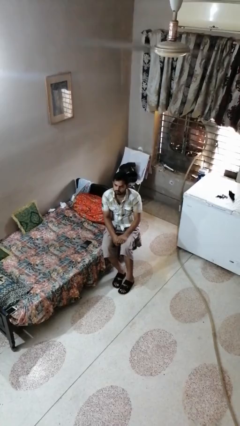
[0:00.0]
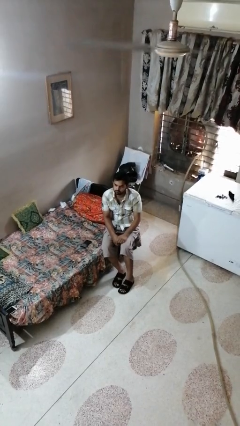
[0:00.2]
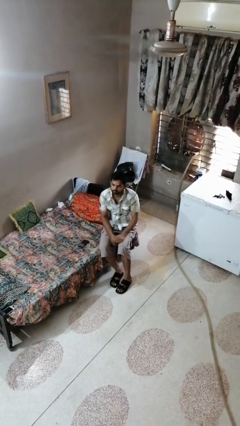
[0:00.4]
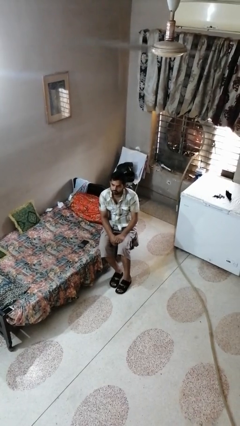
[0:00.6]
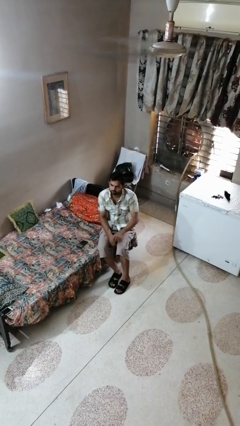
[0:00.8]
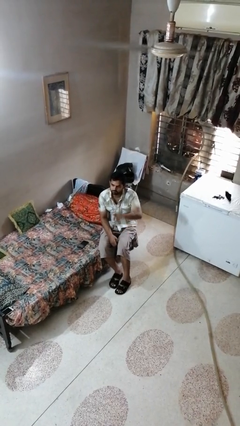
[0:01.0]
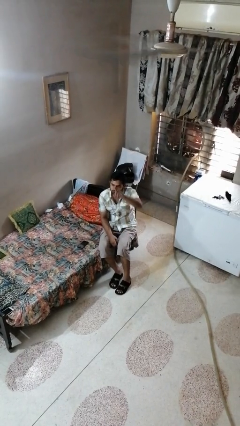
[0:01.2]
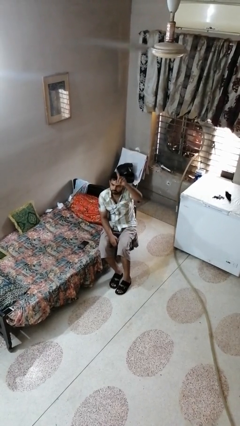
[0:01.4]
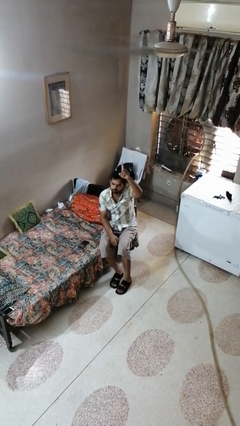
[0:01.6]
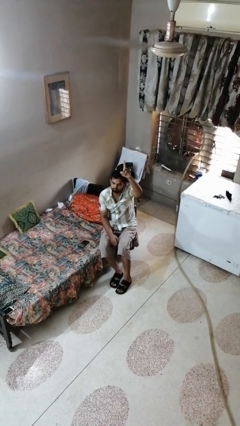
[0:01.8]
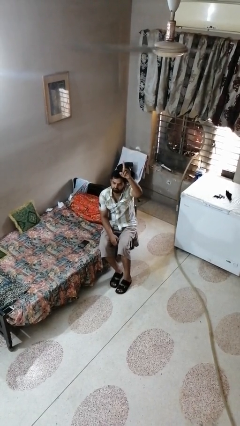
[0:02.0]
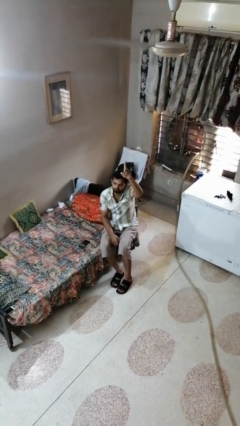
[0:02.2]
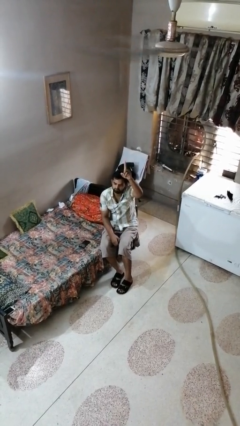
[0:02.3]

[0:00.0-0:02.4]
person gestures raise hand

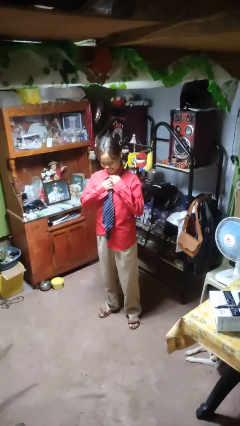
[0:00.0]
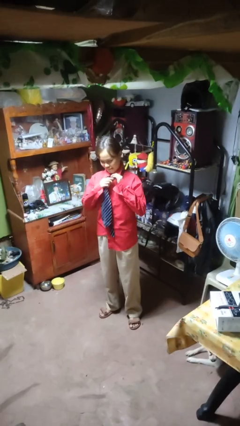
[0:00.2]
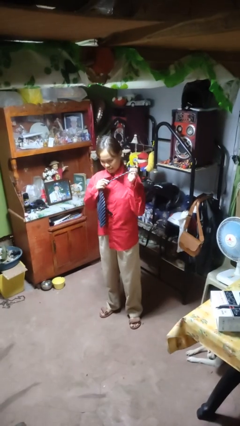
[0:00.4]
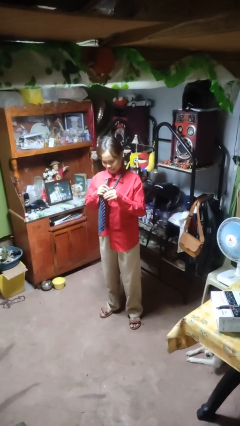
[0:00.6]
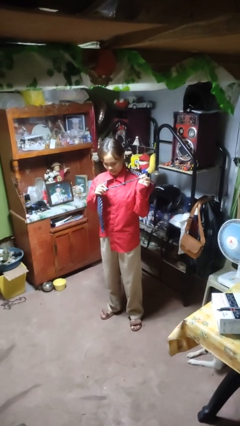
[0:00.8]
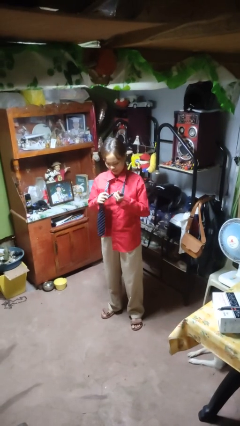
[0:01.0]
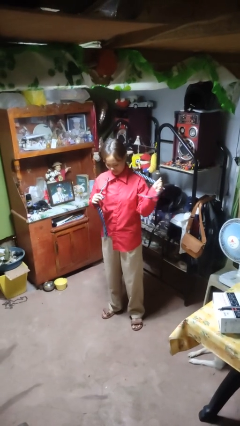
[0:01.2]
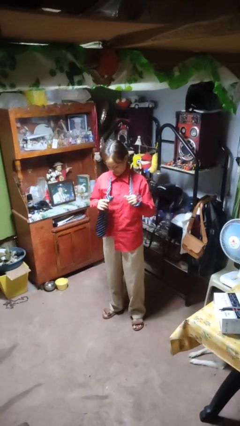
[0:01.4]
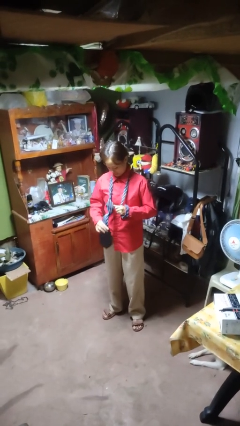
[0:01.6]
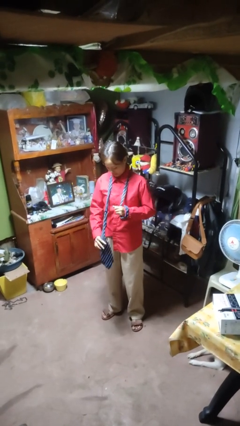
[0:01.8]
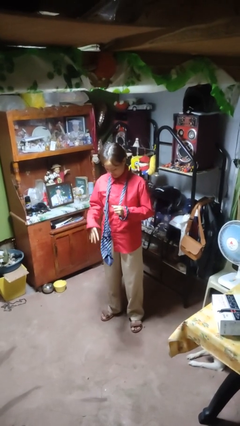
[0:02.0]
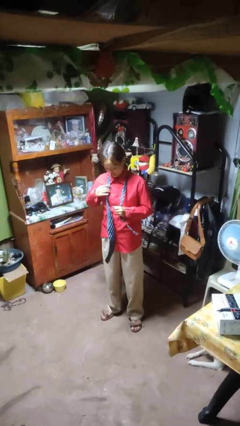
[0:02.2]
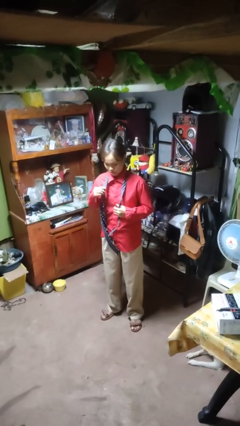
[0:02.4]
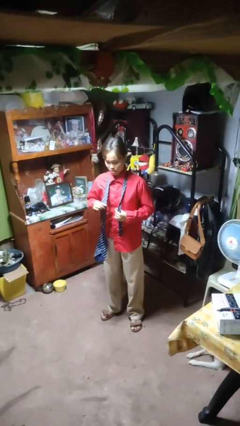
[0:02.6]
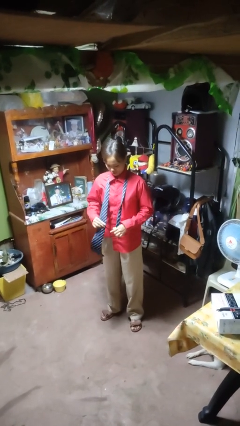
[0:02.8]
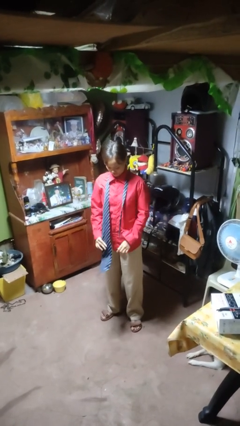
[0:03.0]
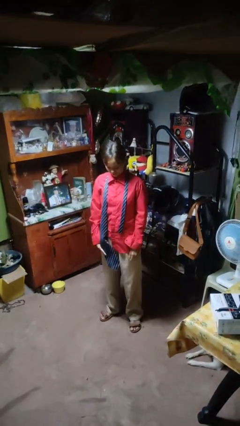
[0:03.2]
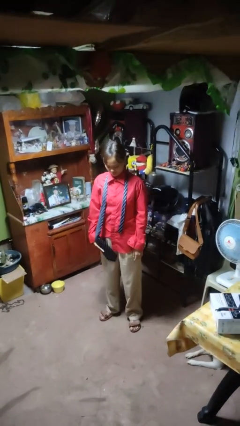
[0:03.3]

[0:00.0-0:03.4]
person takes off necktie

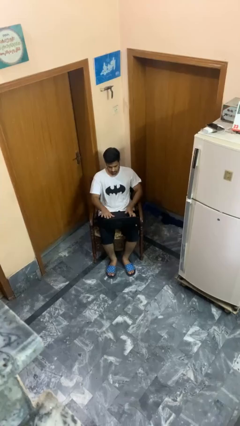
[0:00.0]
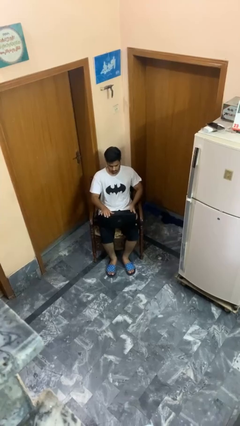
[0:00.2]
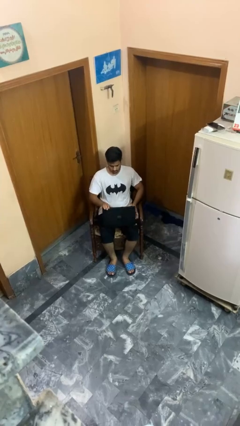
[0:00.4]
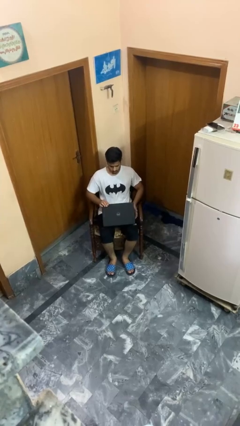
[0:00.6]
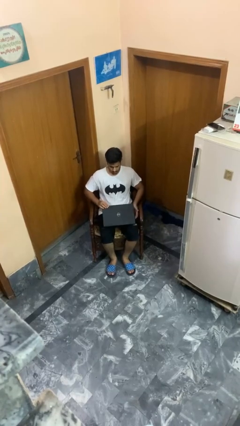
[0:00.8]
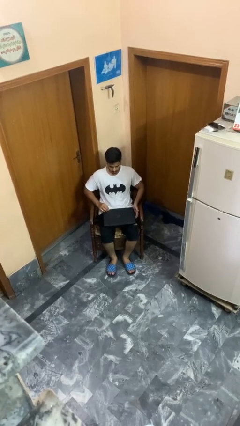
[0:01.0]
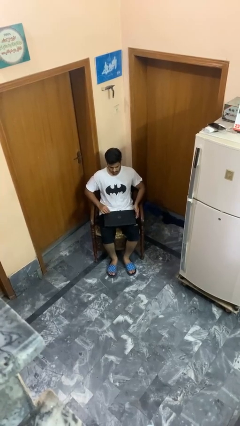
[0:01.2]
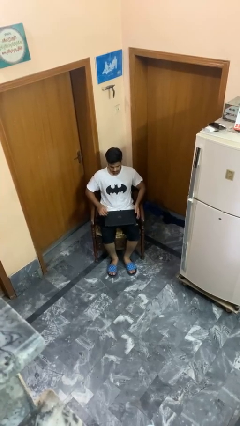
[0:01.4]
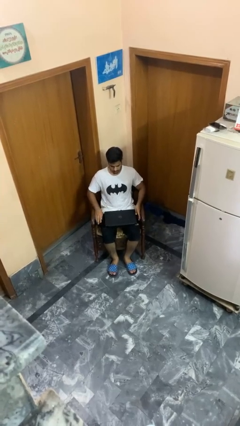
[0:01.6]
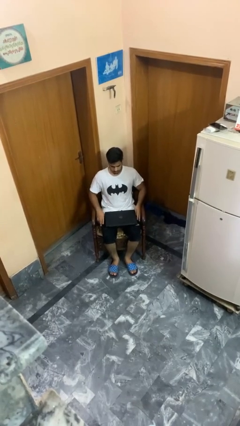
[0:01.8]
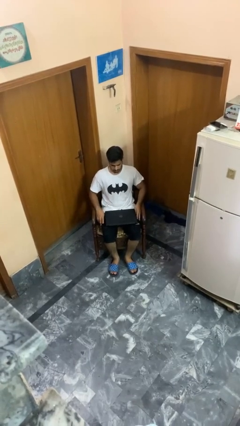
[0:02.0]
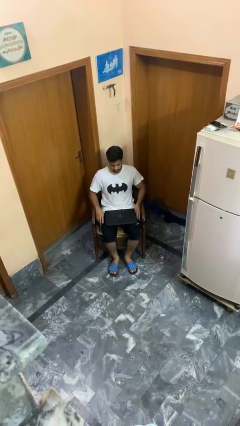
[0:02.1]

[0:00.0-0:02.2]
person closes laptop

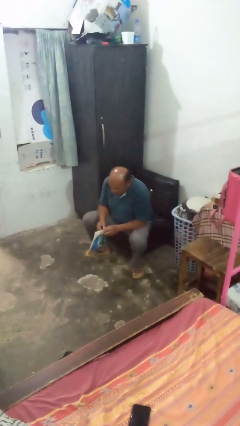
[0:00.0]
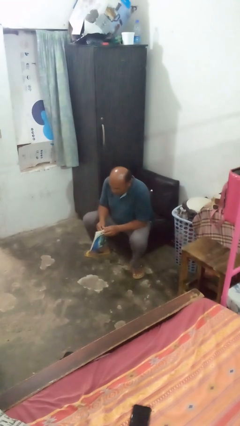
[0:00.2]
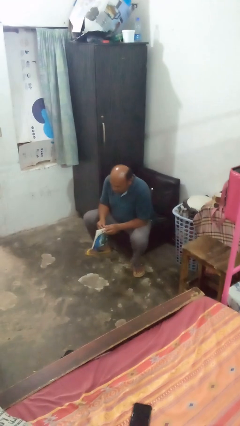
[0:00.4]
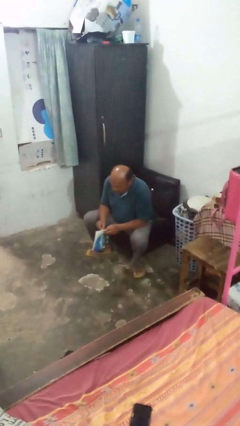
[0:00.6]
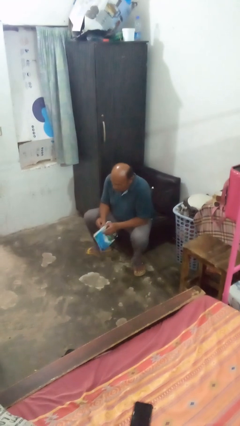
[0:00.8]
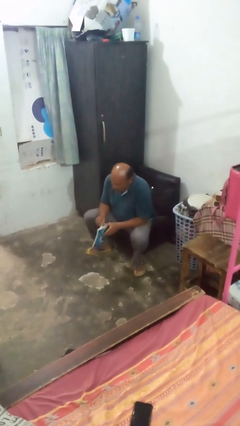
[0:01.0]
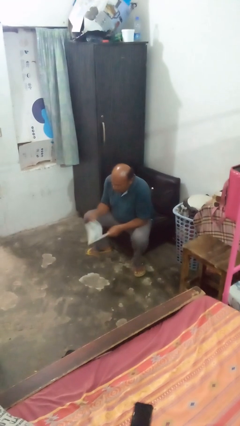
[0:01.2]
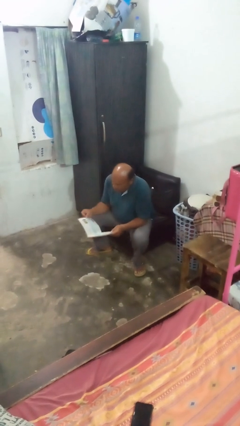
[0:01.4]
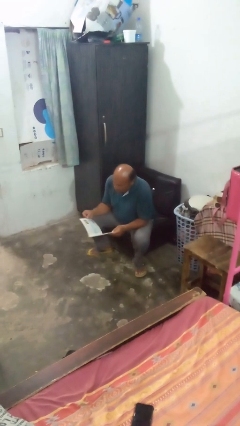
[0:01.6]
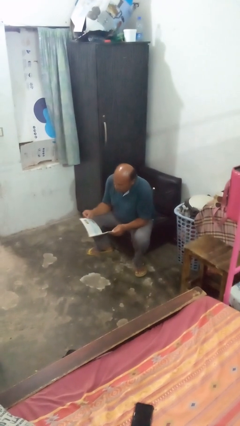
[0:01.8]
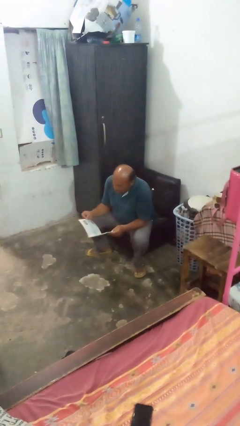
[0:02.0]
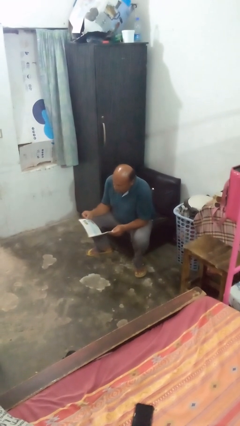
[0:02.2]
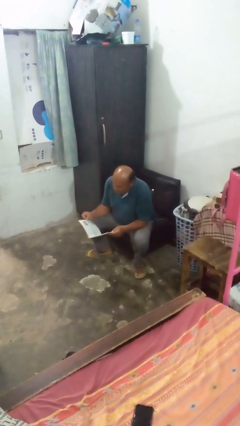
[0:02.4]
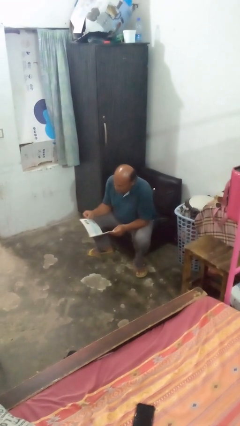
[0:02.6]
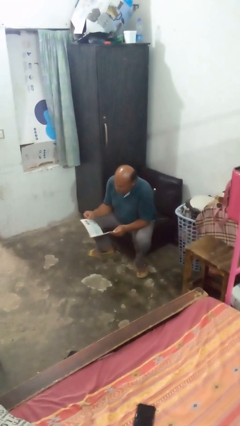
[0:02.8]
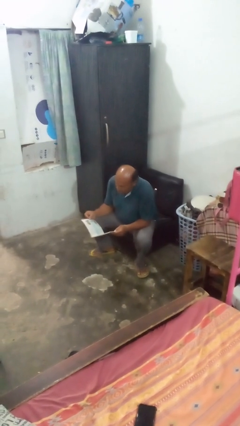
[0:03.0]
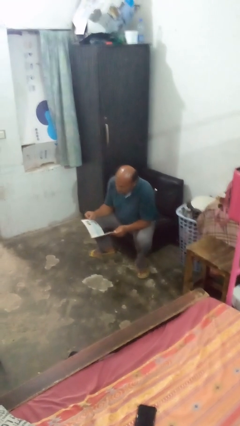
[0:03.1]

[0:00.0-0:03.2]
person reads book

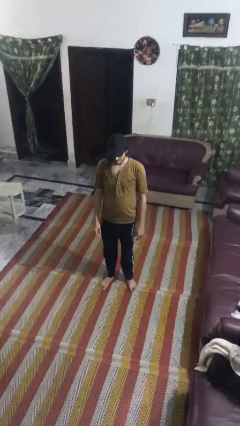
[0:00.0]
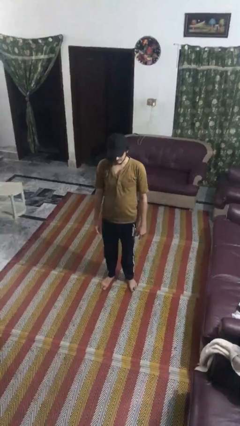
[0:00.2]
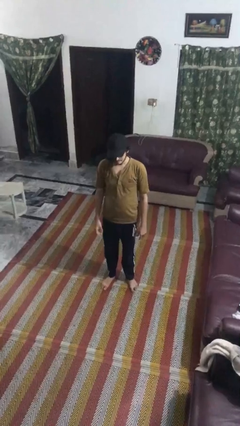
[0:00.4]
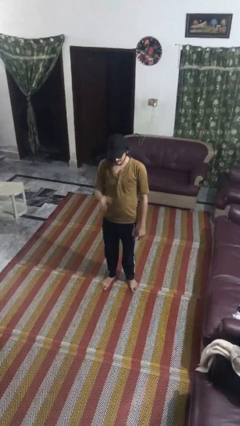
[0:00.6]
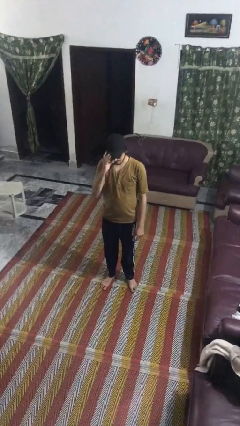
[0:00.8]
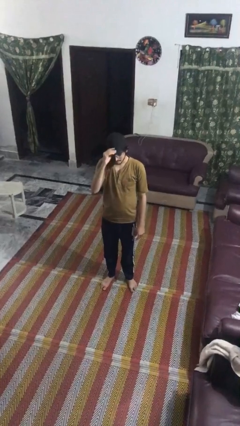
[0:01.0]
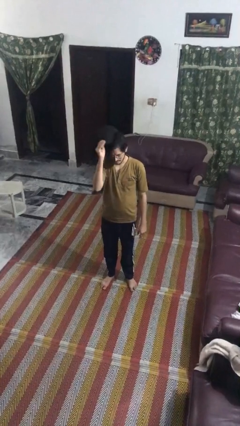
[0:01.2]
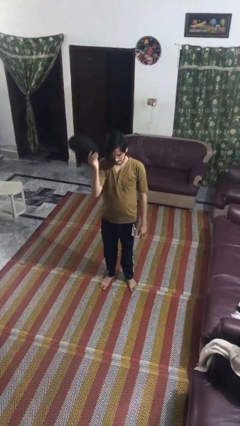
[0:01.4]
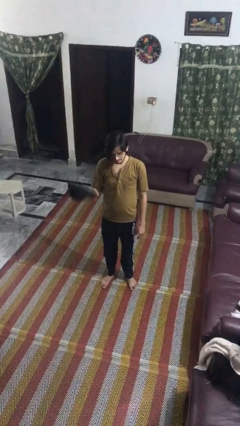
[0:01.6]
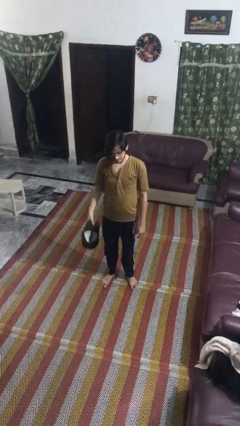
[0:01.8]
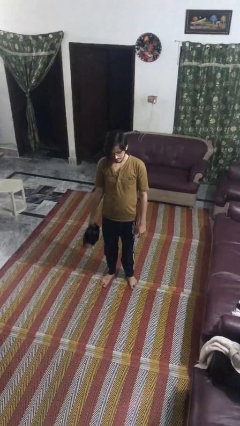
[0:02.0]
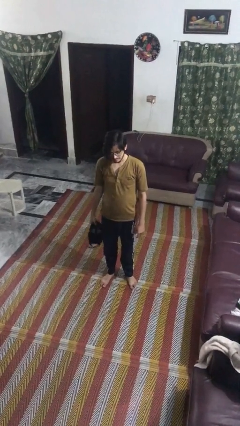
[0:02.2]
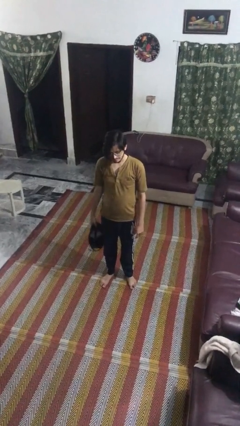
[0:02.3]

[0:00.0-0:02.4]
person takes off hat

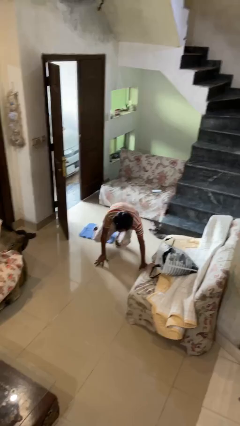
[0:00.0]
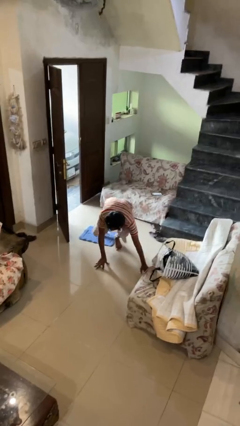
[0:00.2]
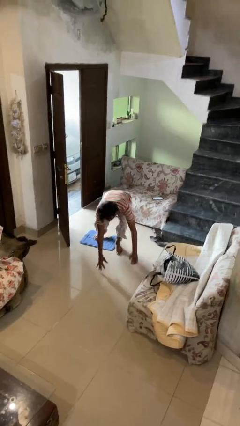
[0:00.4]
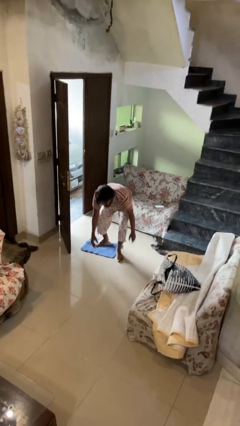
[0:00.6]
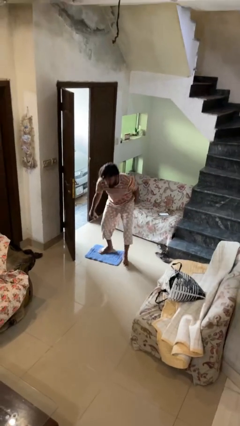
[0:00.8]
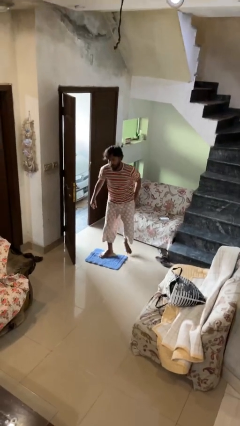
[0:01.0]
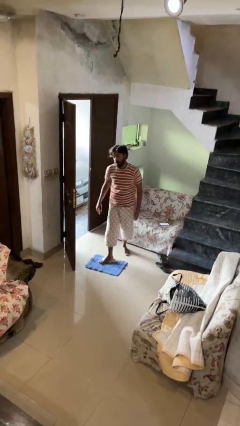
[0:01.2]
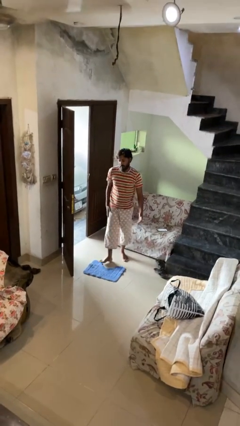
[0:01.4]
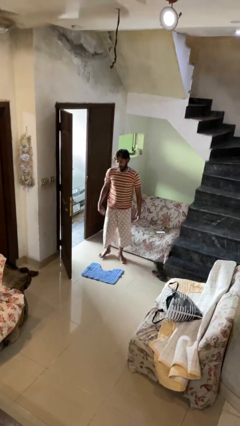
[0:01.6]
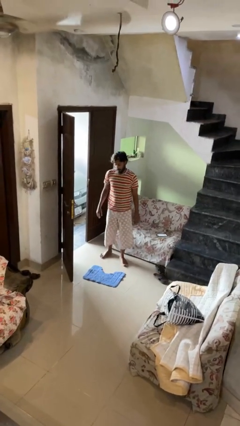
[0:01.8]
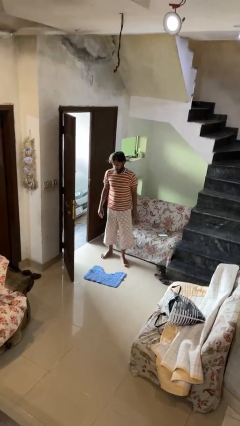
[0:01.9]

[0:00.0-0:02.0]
person stands up from floor
